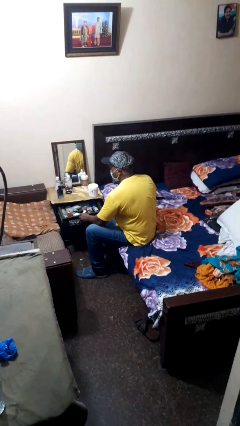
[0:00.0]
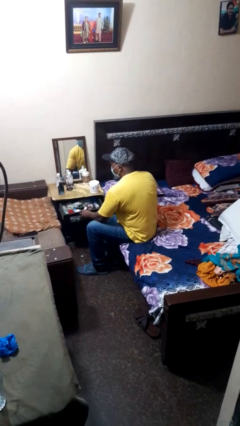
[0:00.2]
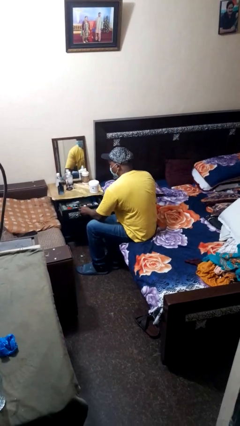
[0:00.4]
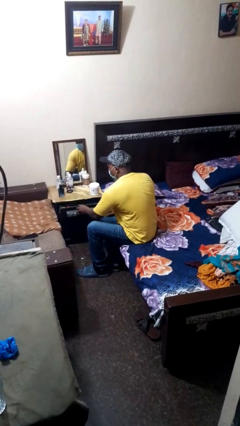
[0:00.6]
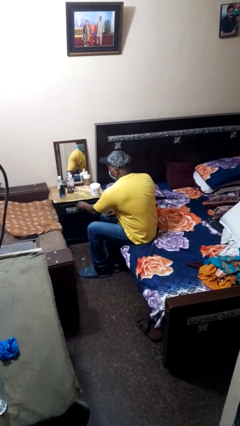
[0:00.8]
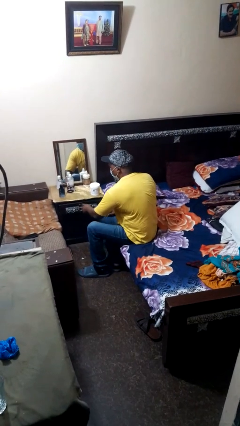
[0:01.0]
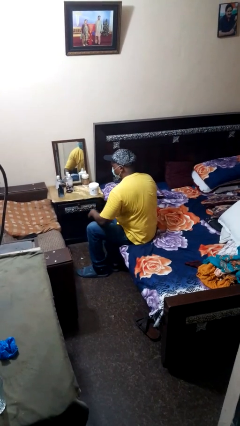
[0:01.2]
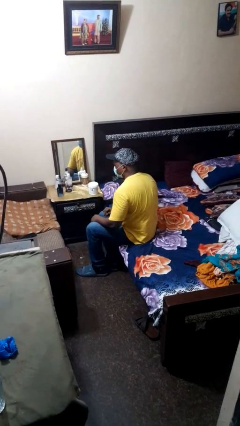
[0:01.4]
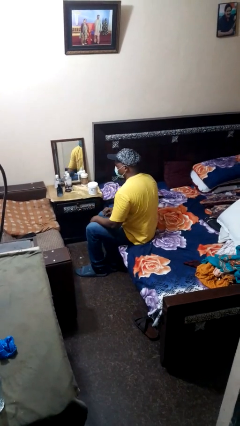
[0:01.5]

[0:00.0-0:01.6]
person closes dresser drawer

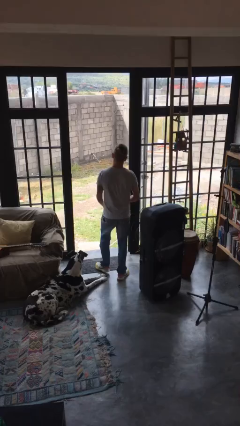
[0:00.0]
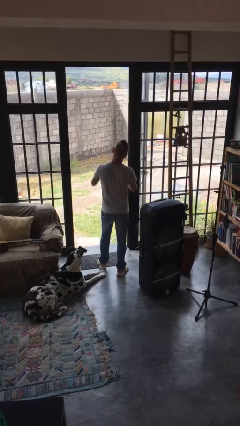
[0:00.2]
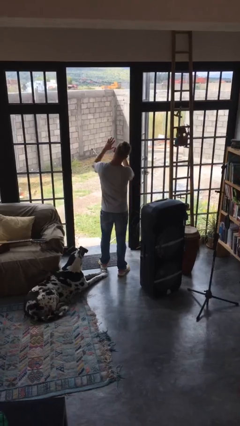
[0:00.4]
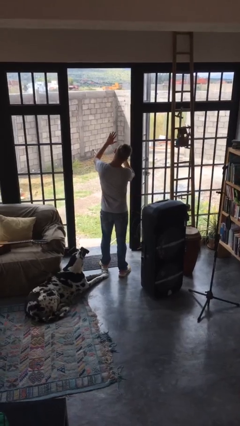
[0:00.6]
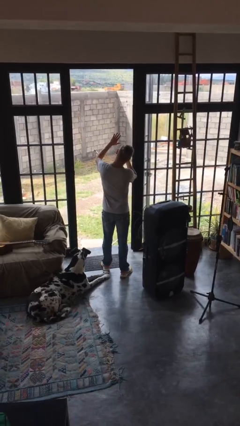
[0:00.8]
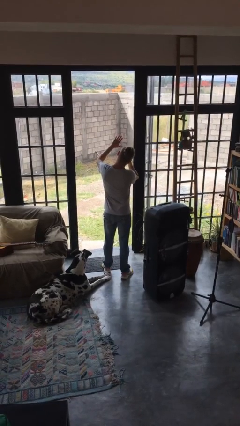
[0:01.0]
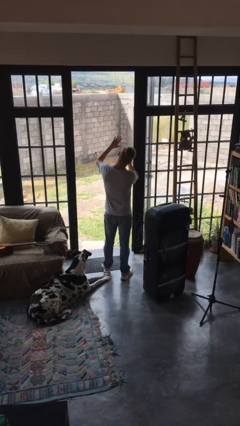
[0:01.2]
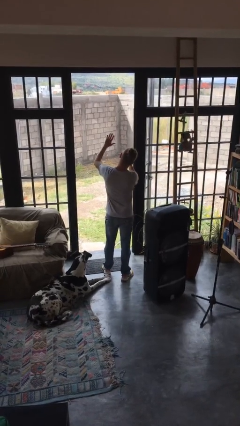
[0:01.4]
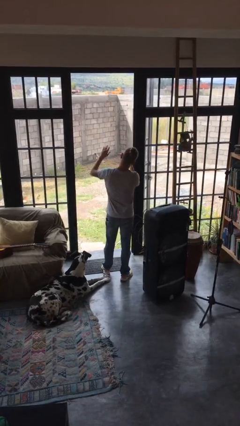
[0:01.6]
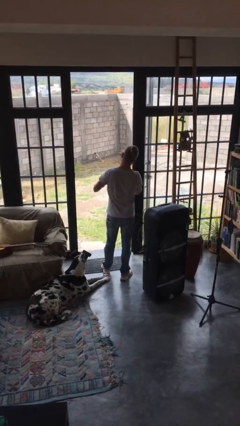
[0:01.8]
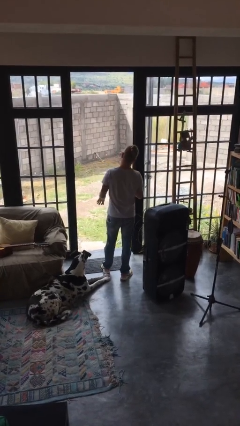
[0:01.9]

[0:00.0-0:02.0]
person shades eyes

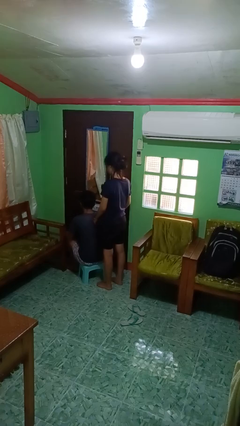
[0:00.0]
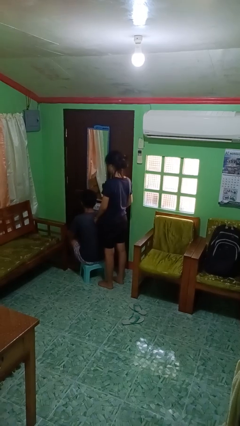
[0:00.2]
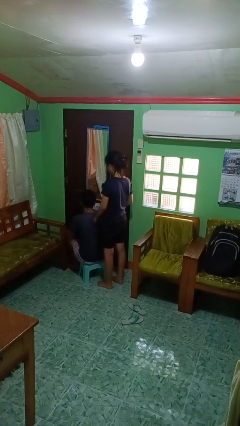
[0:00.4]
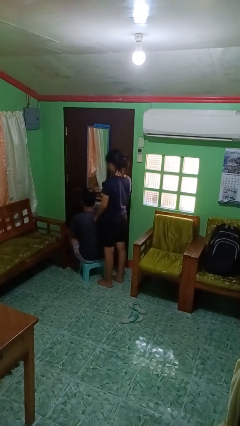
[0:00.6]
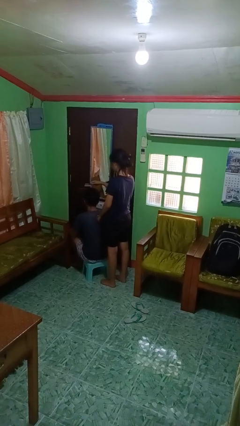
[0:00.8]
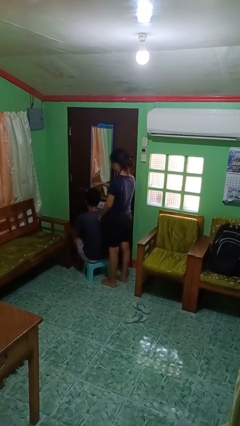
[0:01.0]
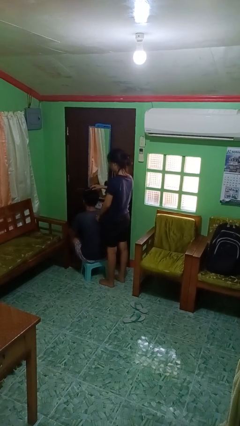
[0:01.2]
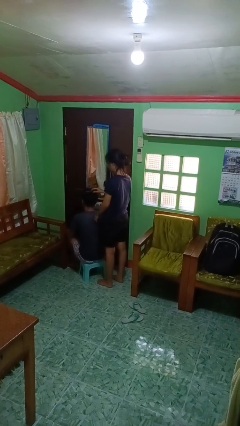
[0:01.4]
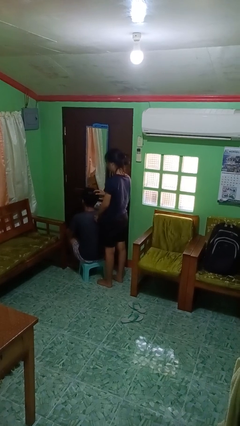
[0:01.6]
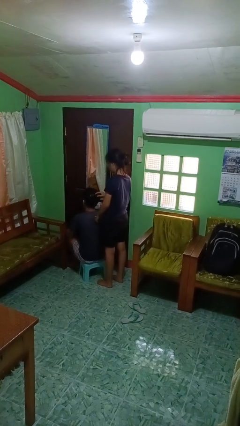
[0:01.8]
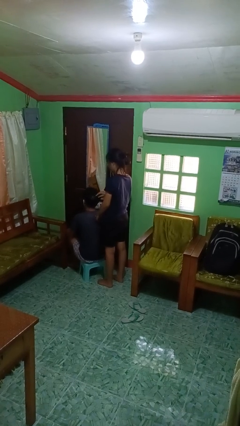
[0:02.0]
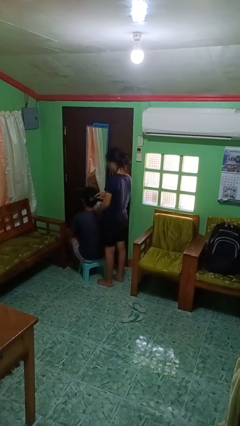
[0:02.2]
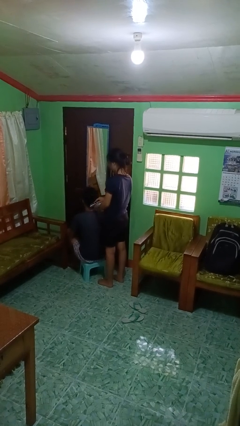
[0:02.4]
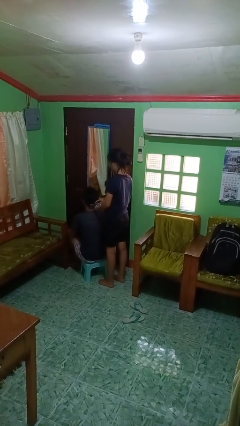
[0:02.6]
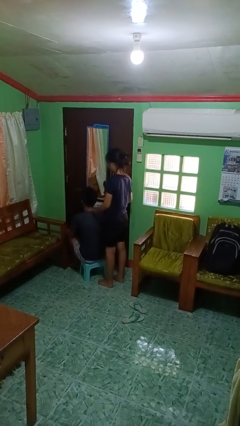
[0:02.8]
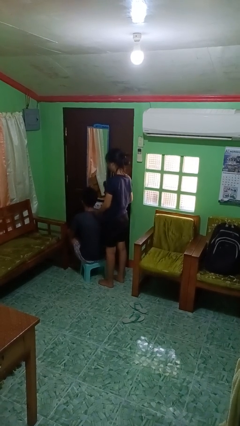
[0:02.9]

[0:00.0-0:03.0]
person brushes hair of person

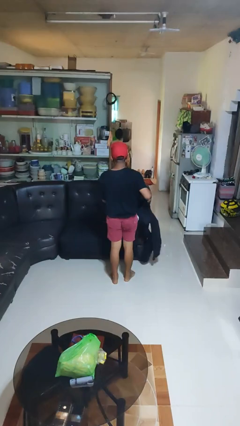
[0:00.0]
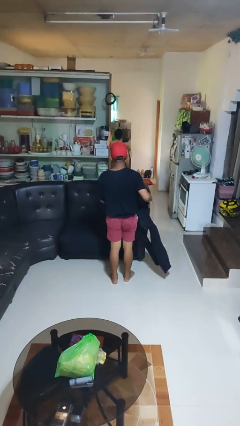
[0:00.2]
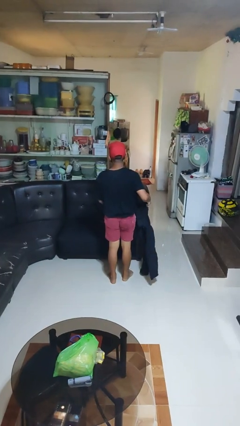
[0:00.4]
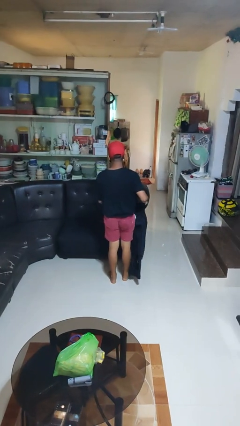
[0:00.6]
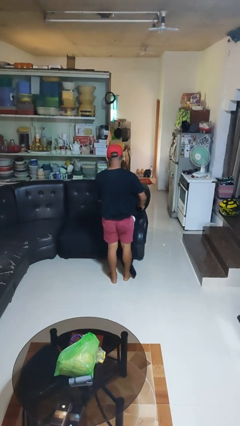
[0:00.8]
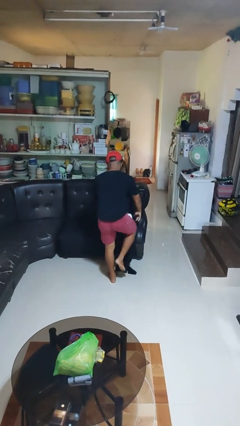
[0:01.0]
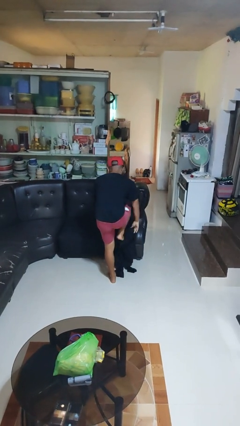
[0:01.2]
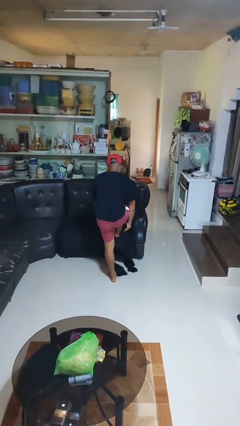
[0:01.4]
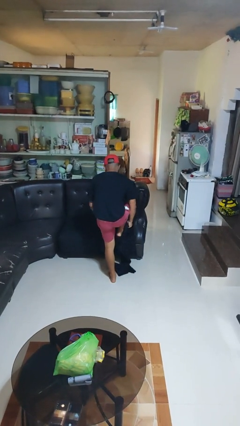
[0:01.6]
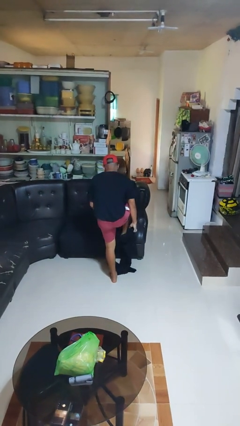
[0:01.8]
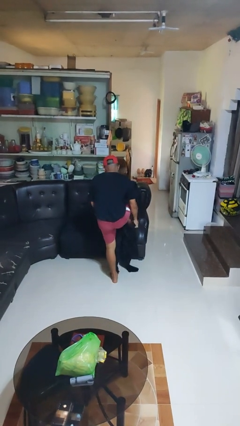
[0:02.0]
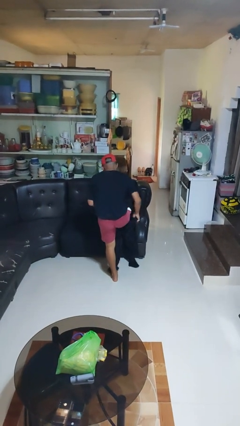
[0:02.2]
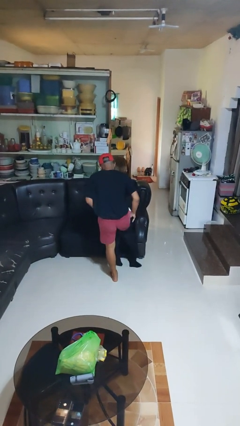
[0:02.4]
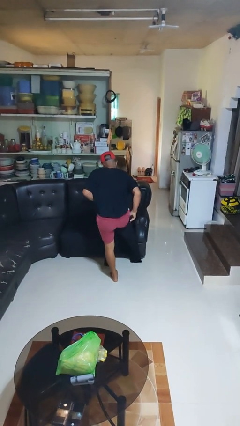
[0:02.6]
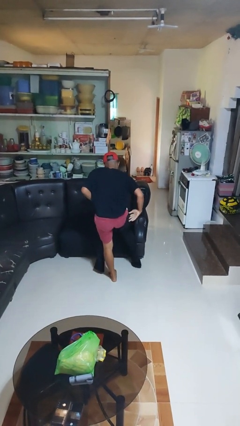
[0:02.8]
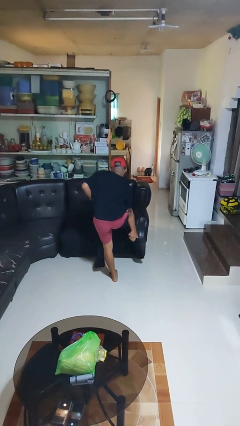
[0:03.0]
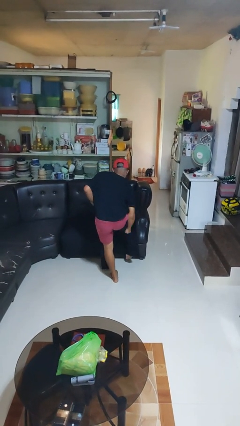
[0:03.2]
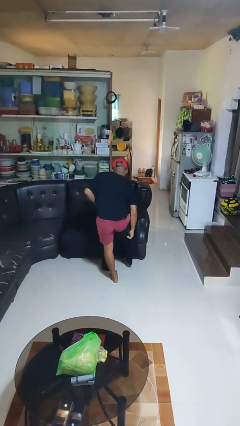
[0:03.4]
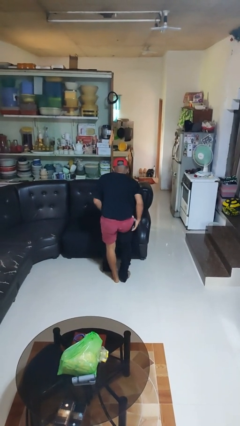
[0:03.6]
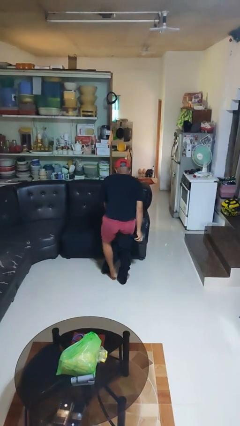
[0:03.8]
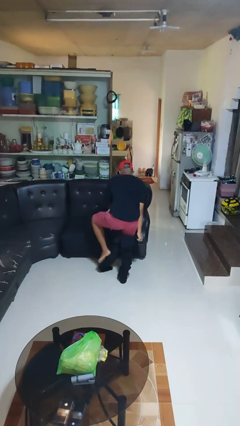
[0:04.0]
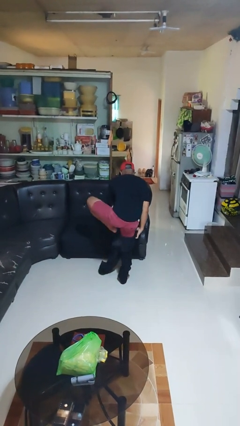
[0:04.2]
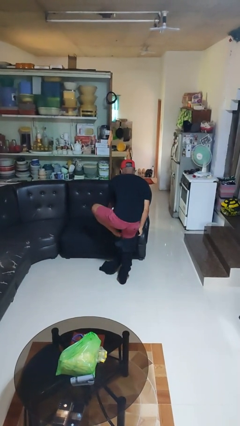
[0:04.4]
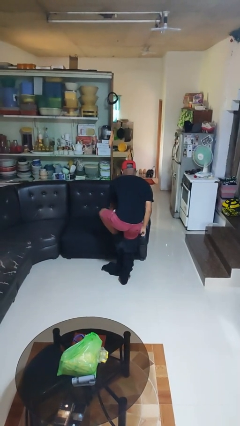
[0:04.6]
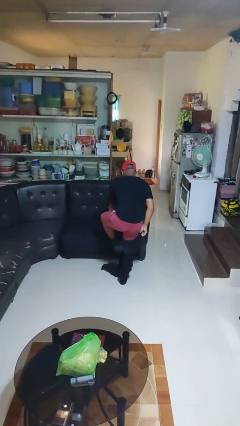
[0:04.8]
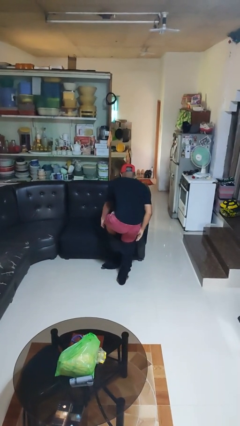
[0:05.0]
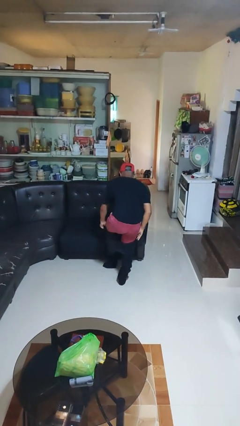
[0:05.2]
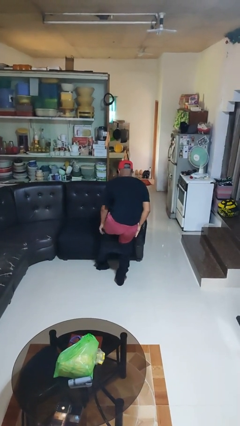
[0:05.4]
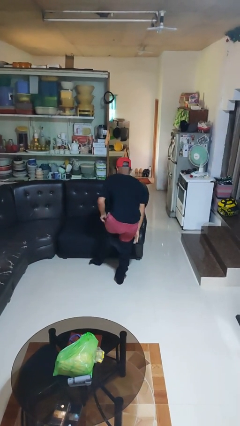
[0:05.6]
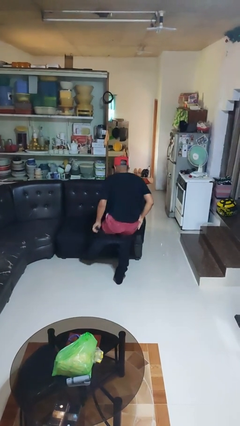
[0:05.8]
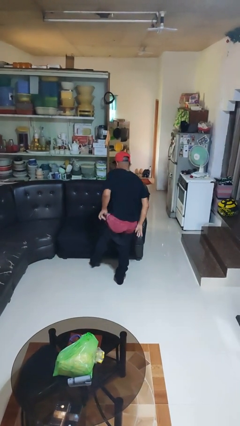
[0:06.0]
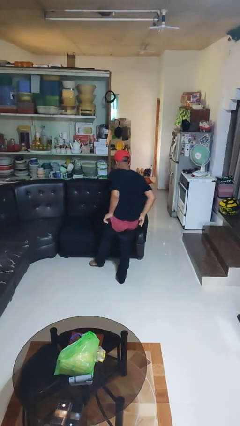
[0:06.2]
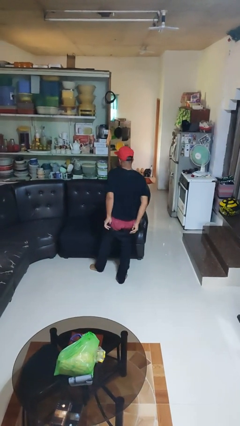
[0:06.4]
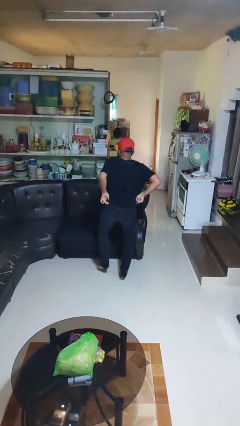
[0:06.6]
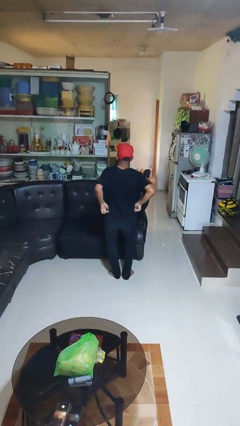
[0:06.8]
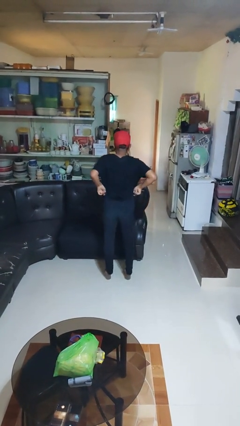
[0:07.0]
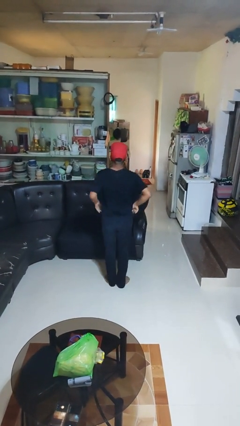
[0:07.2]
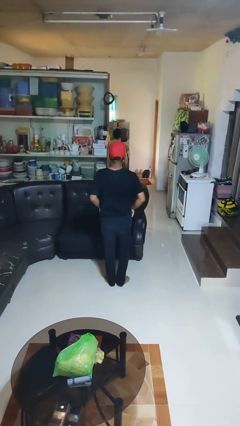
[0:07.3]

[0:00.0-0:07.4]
person puts on pants

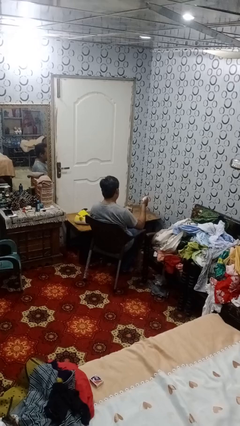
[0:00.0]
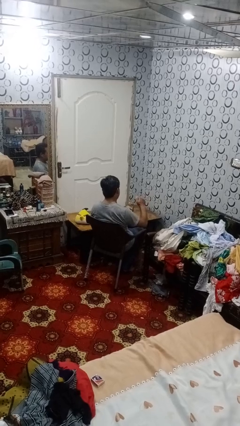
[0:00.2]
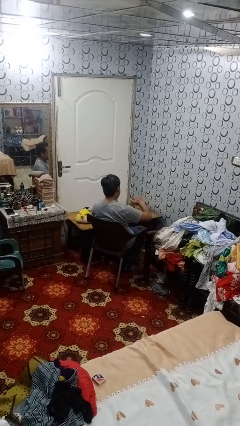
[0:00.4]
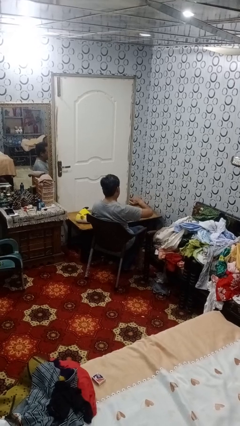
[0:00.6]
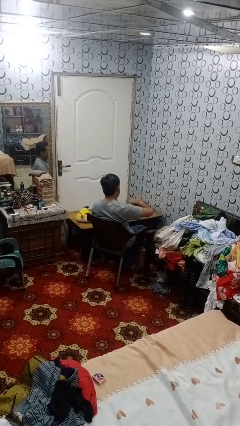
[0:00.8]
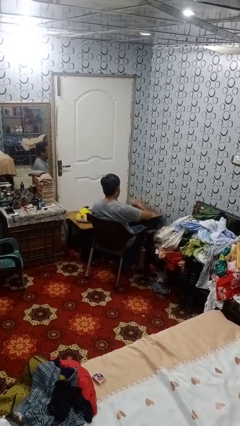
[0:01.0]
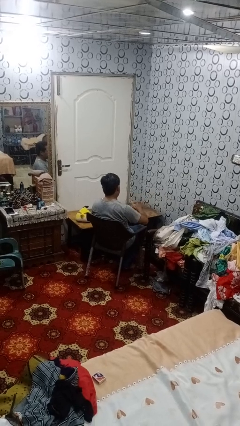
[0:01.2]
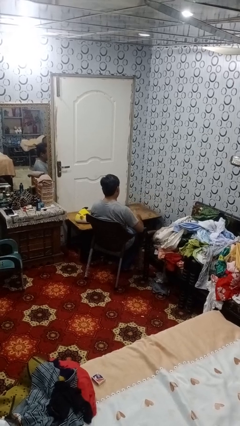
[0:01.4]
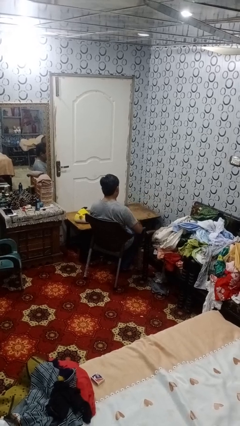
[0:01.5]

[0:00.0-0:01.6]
person closes jar

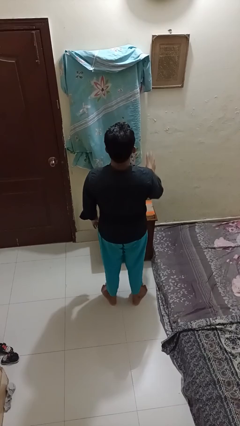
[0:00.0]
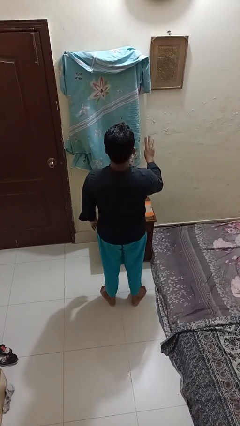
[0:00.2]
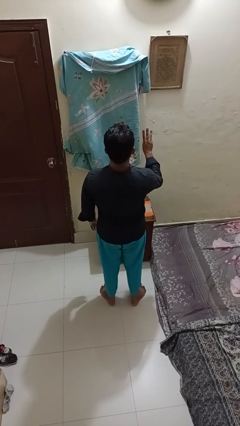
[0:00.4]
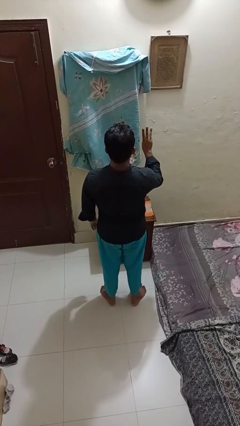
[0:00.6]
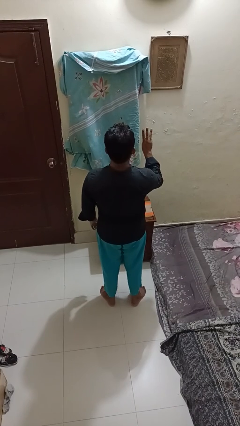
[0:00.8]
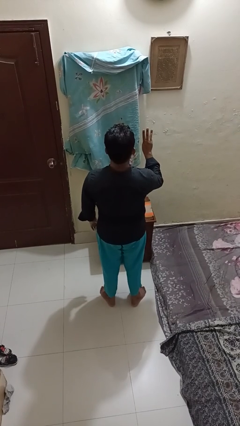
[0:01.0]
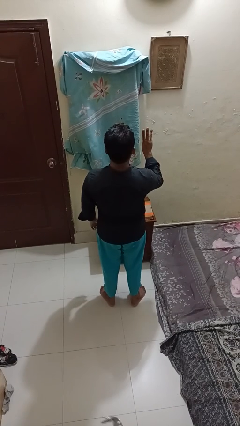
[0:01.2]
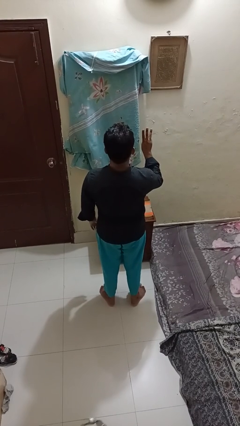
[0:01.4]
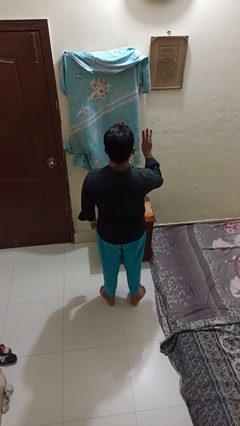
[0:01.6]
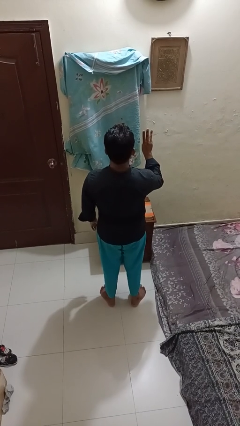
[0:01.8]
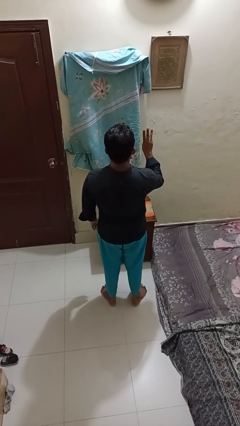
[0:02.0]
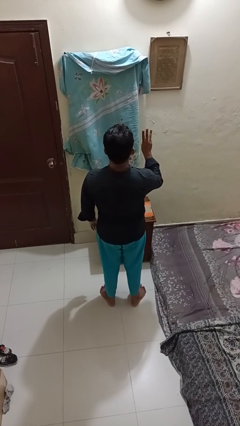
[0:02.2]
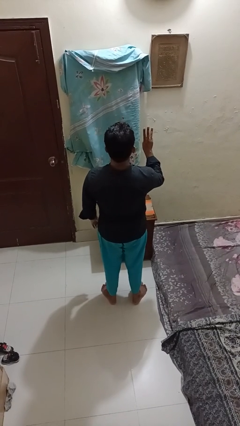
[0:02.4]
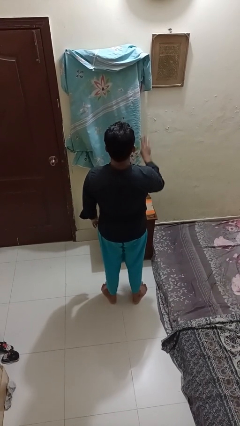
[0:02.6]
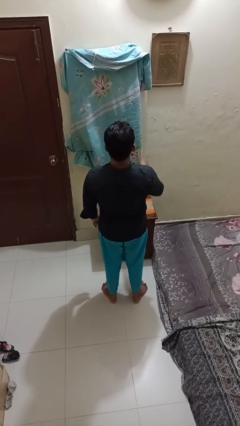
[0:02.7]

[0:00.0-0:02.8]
person gestures number three
